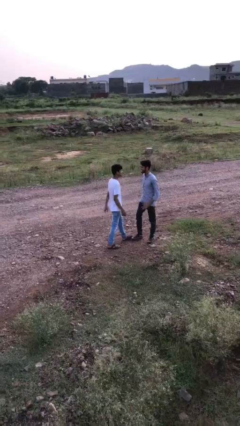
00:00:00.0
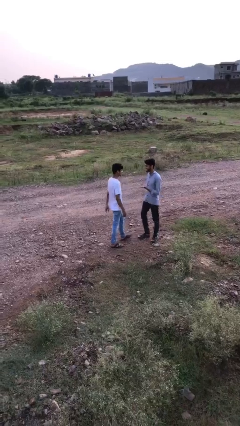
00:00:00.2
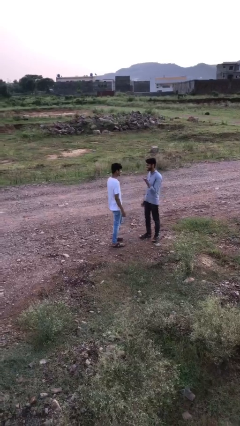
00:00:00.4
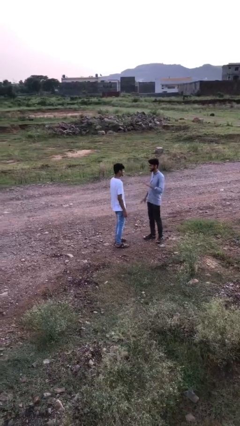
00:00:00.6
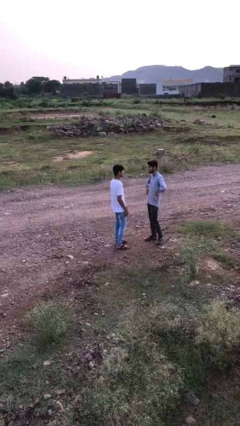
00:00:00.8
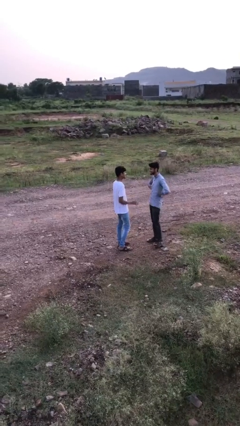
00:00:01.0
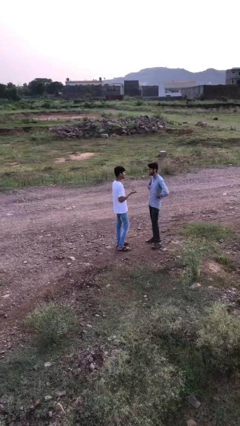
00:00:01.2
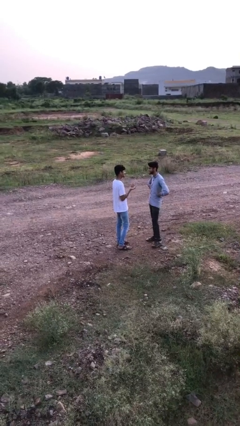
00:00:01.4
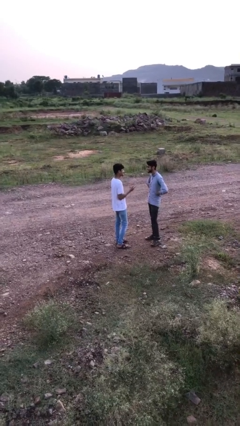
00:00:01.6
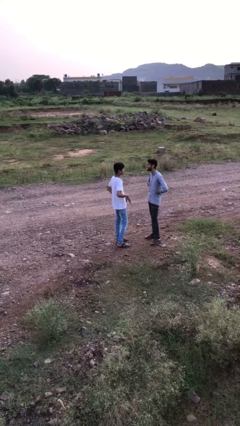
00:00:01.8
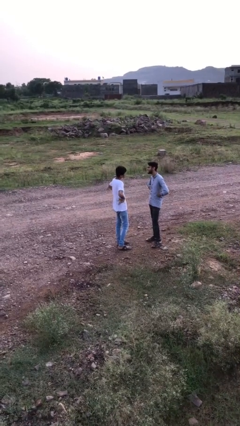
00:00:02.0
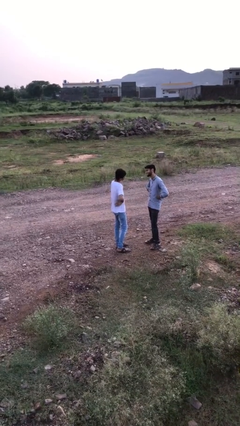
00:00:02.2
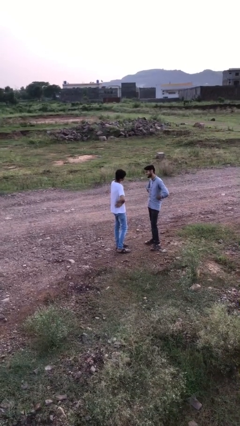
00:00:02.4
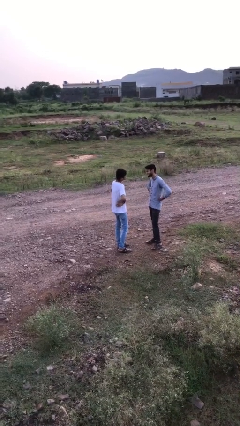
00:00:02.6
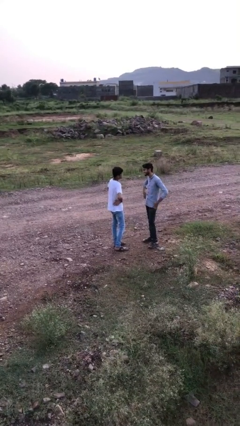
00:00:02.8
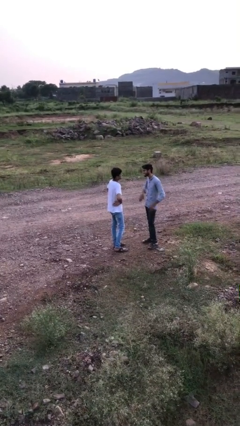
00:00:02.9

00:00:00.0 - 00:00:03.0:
person talks to person

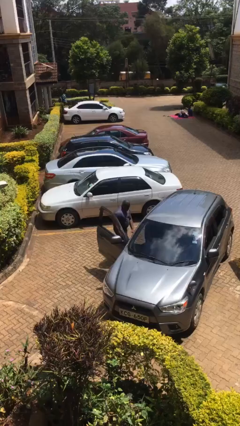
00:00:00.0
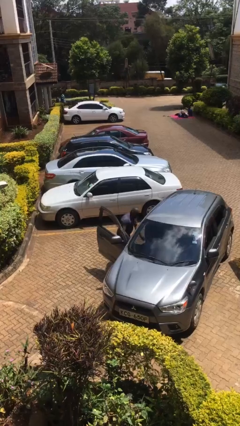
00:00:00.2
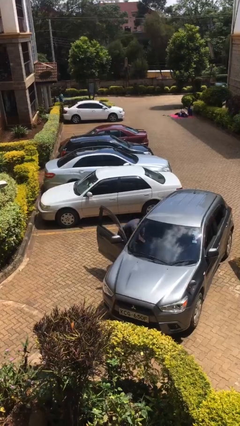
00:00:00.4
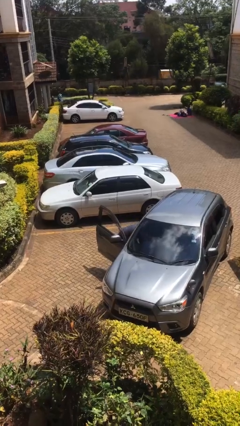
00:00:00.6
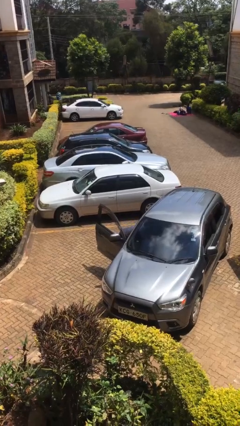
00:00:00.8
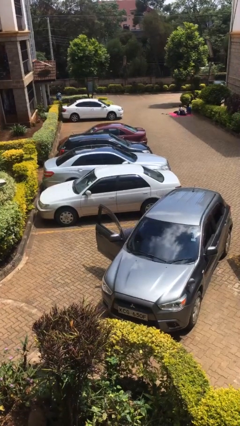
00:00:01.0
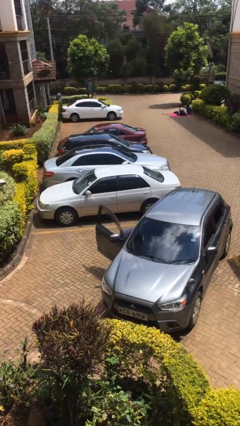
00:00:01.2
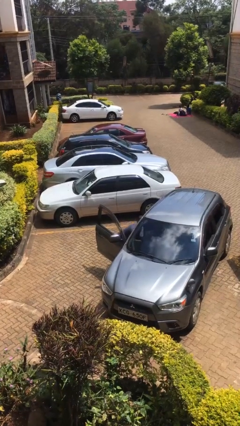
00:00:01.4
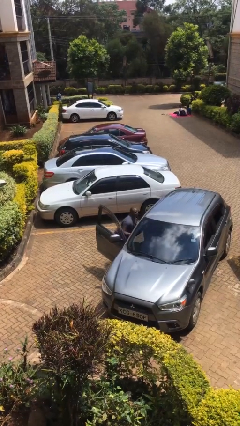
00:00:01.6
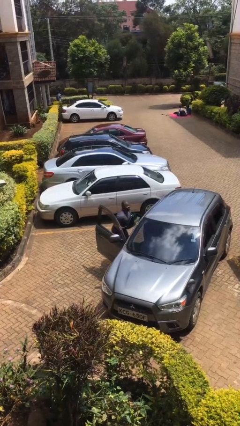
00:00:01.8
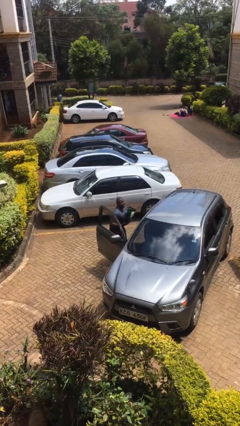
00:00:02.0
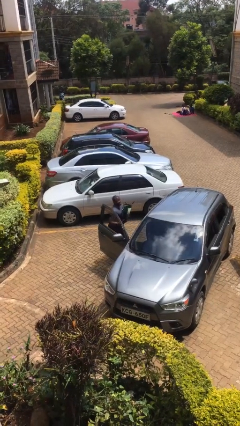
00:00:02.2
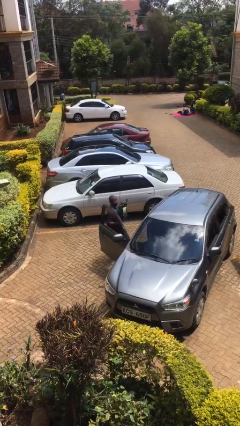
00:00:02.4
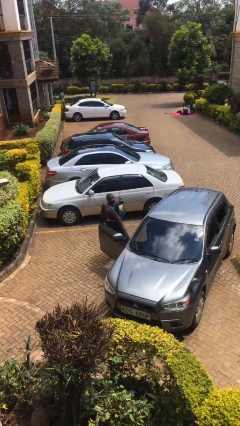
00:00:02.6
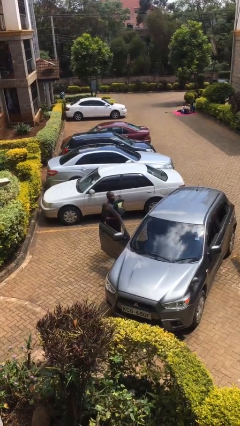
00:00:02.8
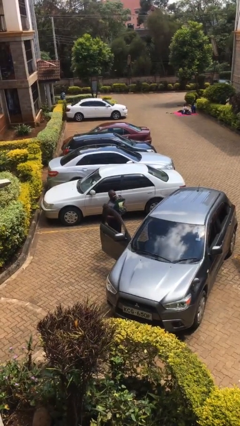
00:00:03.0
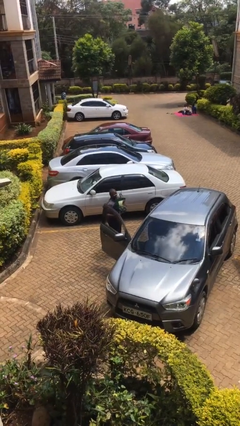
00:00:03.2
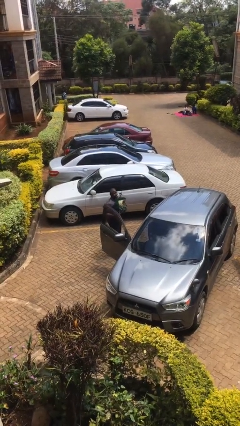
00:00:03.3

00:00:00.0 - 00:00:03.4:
person unloads car

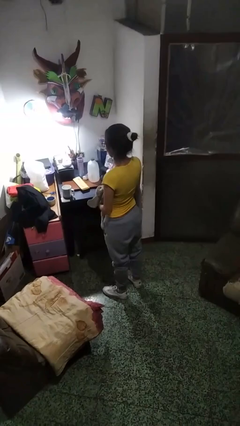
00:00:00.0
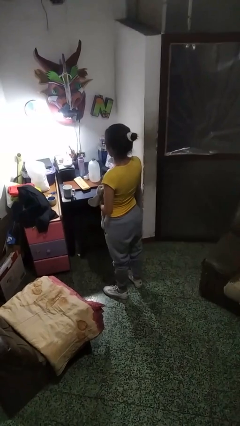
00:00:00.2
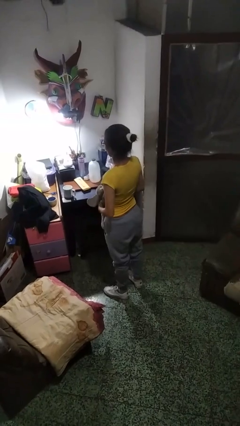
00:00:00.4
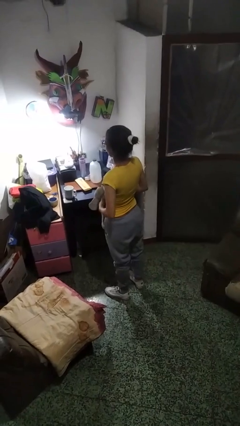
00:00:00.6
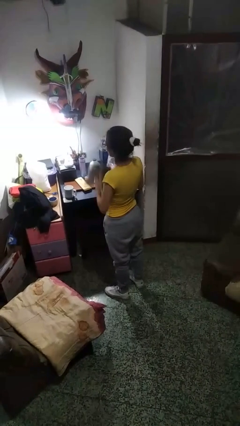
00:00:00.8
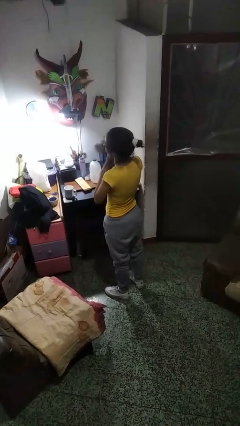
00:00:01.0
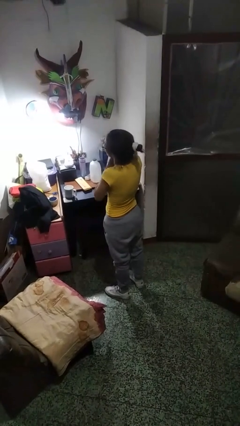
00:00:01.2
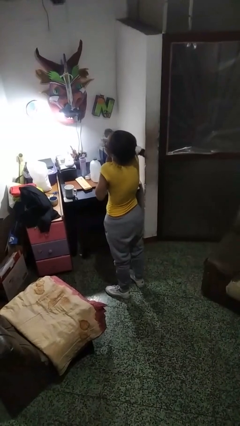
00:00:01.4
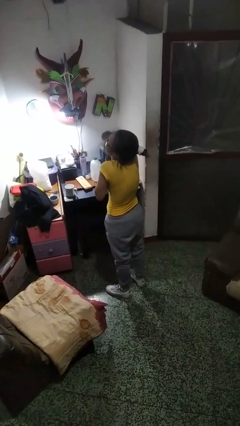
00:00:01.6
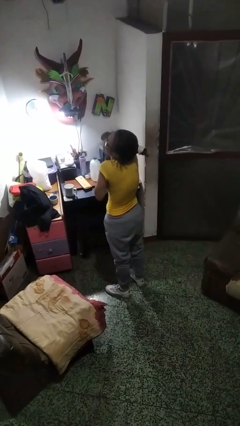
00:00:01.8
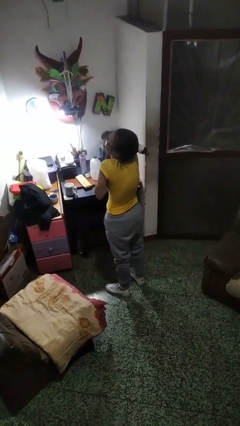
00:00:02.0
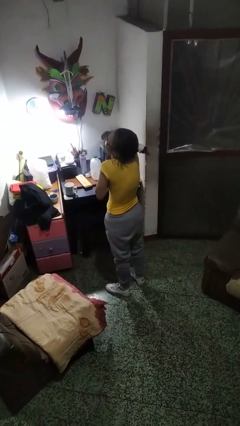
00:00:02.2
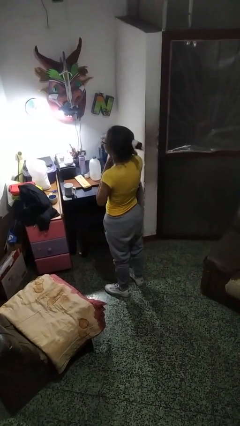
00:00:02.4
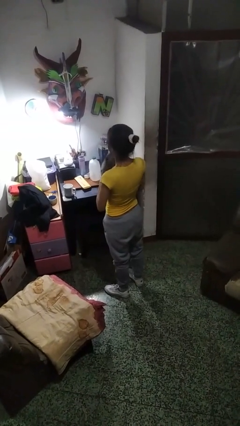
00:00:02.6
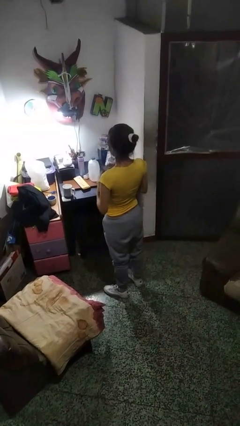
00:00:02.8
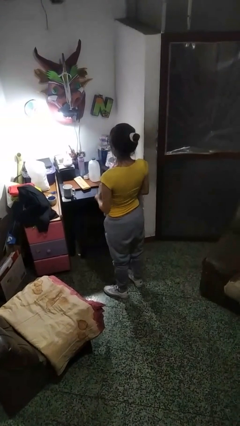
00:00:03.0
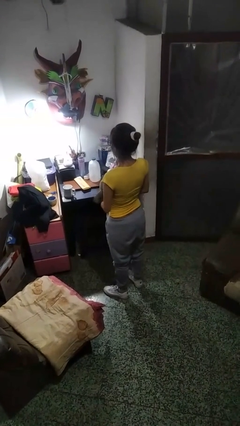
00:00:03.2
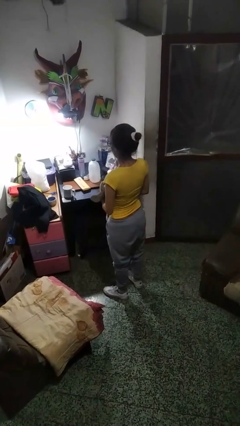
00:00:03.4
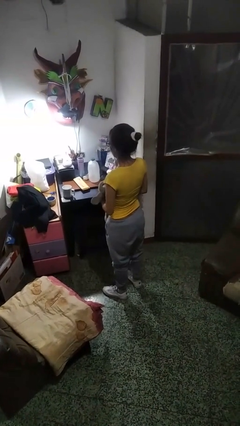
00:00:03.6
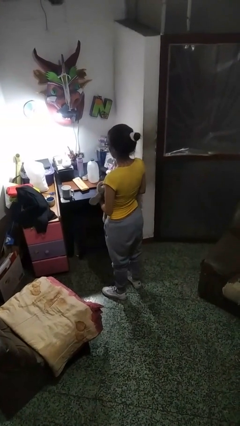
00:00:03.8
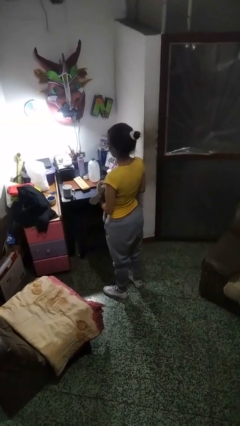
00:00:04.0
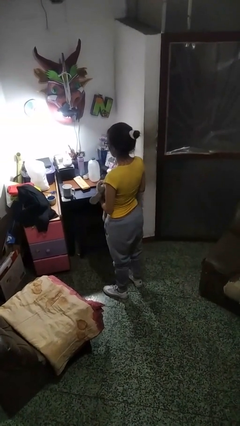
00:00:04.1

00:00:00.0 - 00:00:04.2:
person hugs stuffed animal

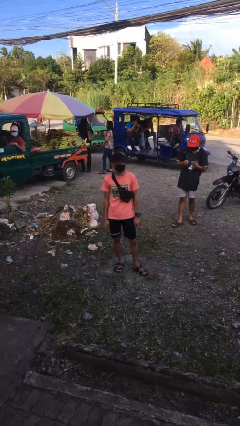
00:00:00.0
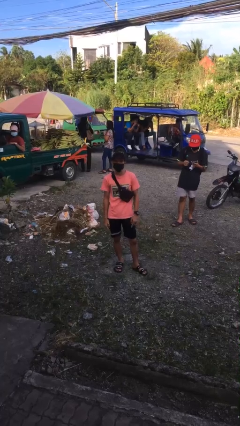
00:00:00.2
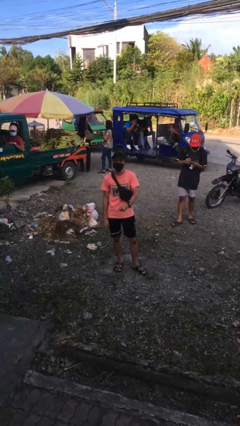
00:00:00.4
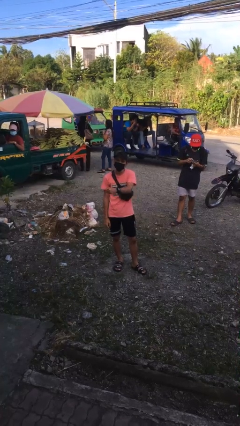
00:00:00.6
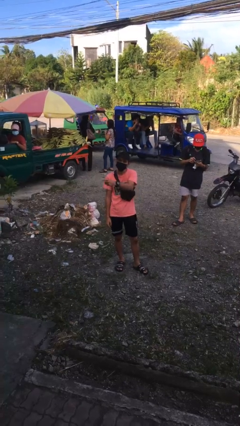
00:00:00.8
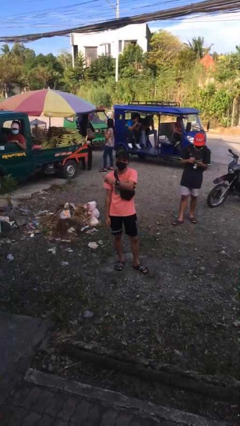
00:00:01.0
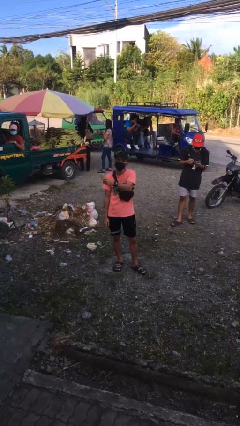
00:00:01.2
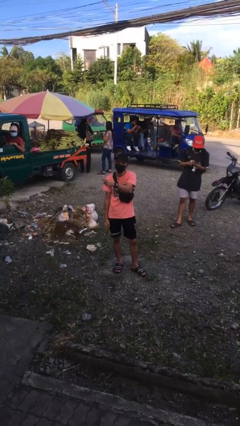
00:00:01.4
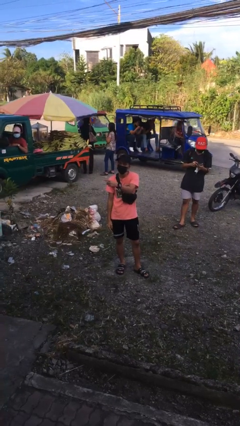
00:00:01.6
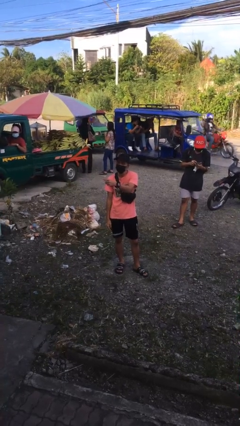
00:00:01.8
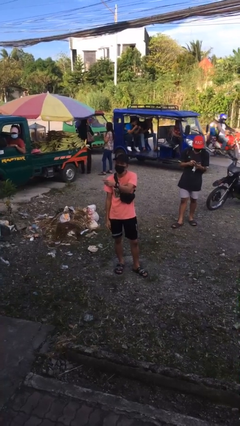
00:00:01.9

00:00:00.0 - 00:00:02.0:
person points at person

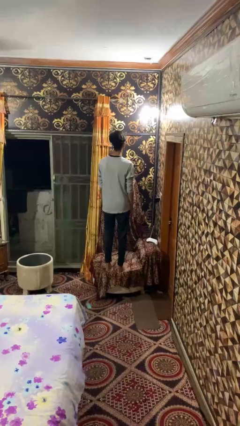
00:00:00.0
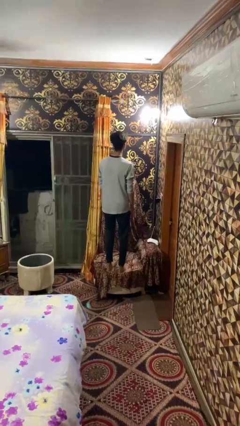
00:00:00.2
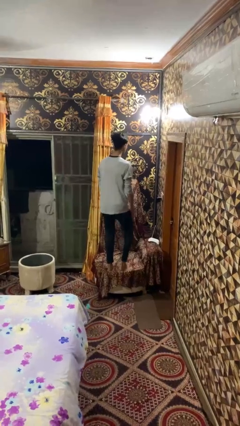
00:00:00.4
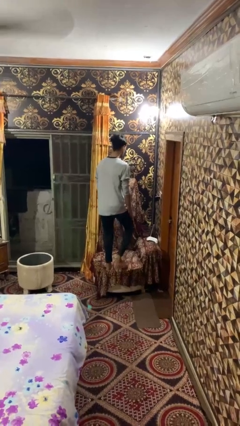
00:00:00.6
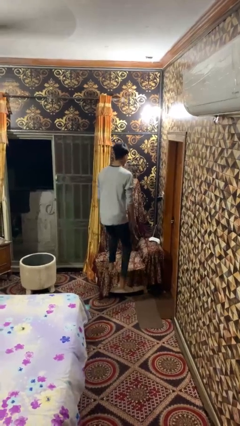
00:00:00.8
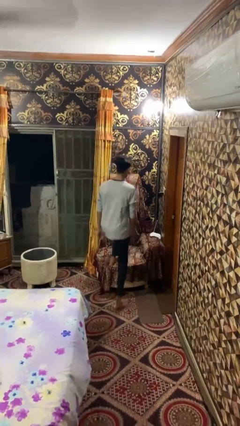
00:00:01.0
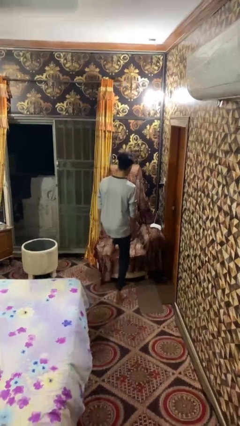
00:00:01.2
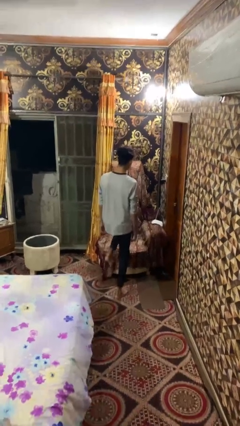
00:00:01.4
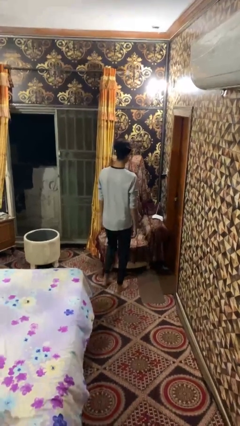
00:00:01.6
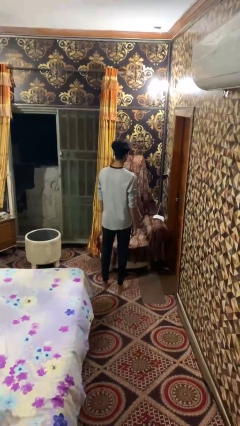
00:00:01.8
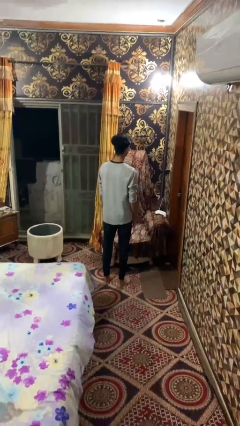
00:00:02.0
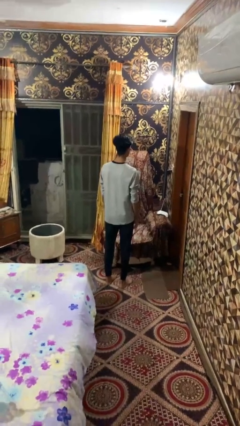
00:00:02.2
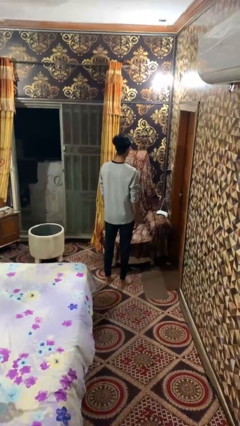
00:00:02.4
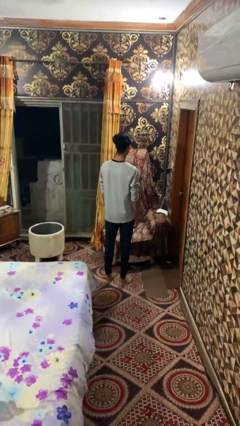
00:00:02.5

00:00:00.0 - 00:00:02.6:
person climbs off couch

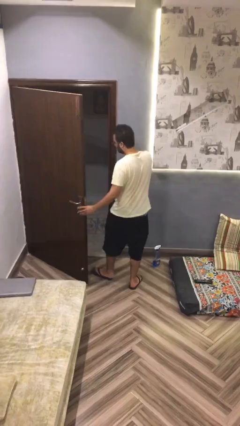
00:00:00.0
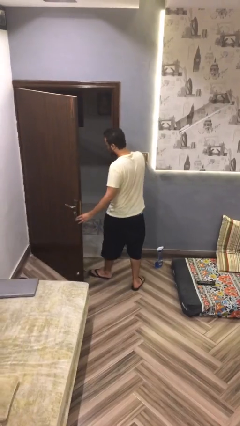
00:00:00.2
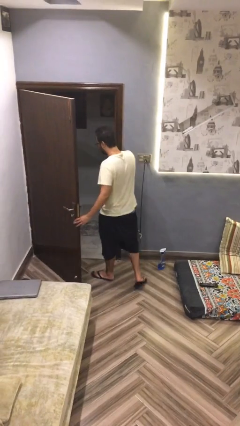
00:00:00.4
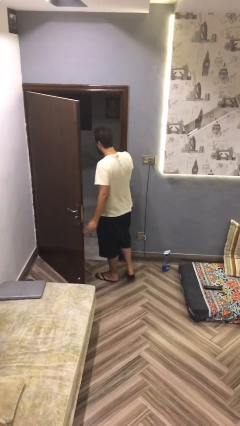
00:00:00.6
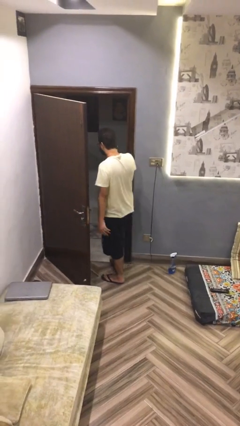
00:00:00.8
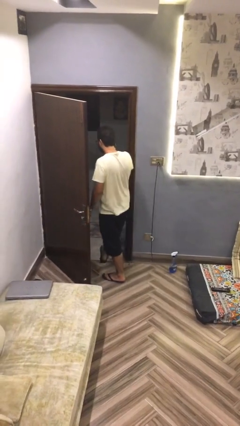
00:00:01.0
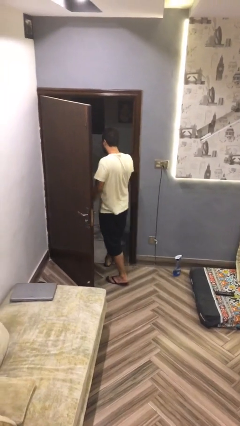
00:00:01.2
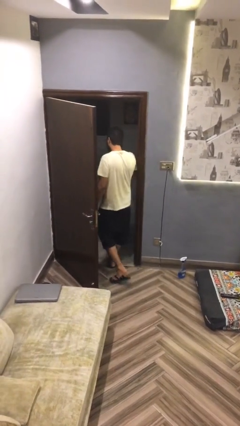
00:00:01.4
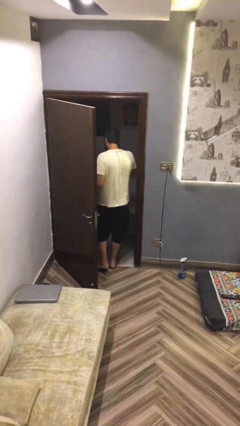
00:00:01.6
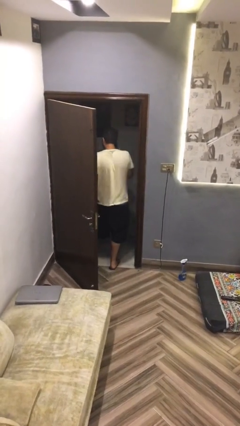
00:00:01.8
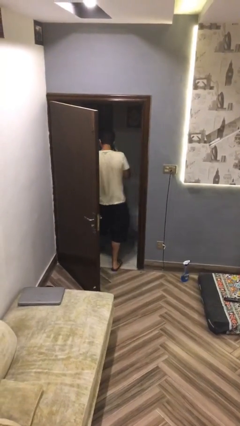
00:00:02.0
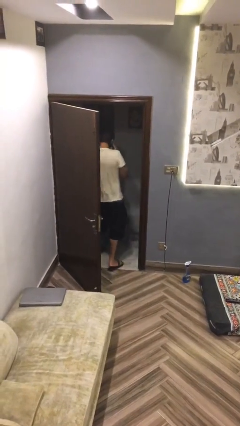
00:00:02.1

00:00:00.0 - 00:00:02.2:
person exits scene through structure
